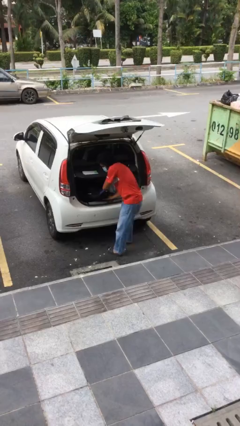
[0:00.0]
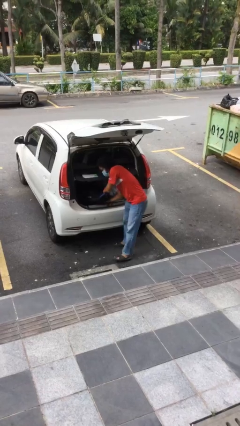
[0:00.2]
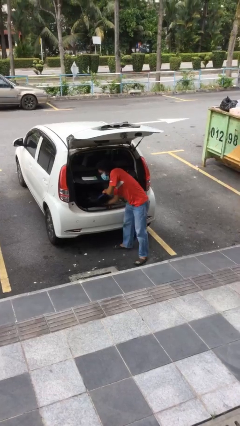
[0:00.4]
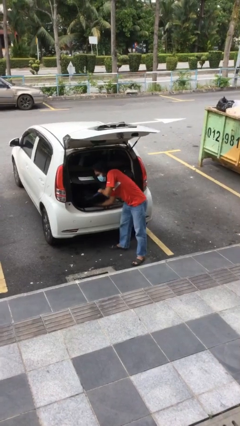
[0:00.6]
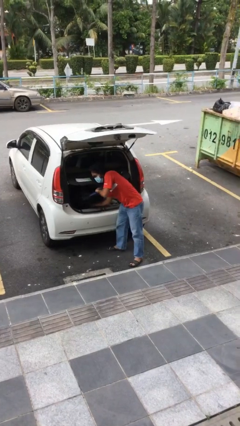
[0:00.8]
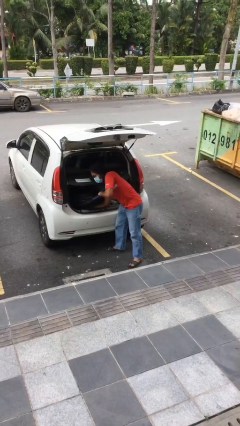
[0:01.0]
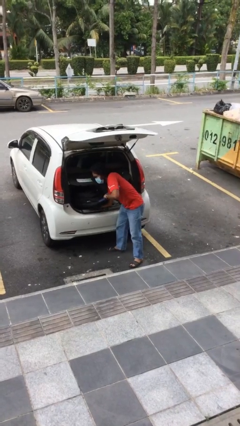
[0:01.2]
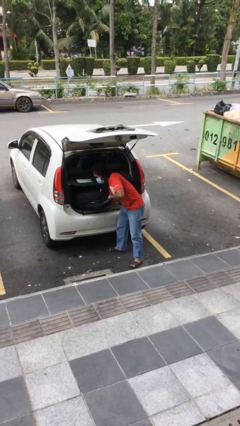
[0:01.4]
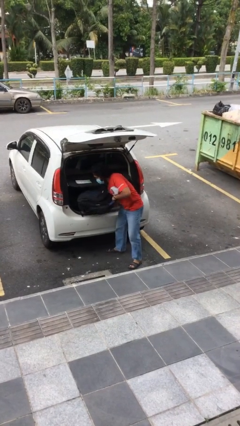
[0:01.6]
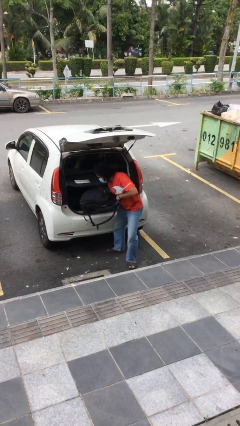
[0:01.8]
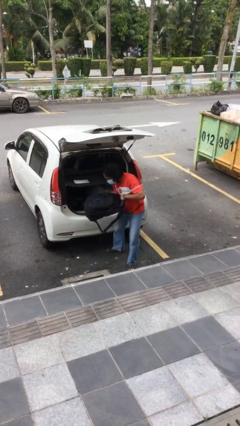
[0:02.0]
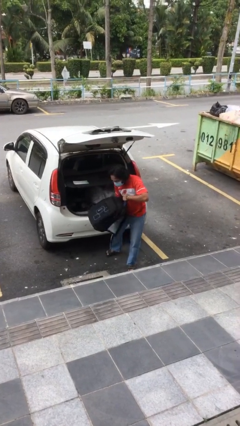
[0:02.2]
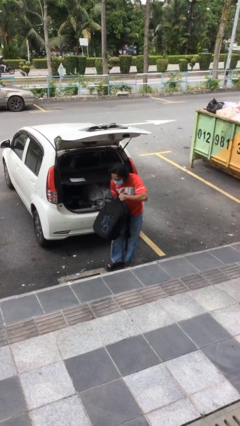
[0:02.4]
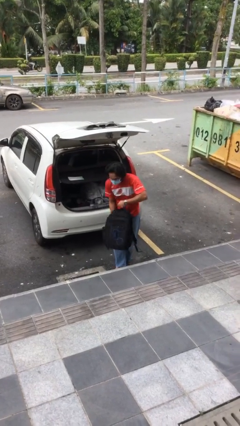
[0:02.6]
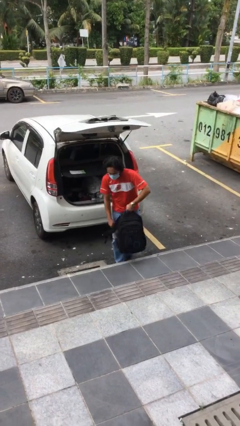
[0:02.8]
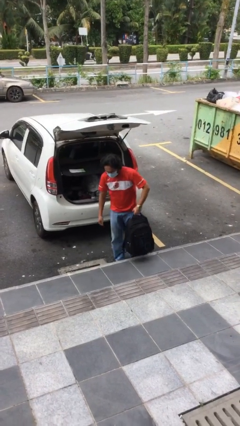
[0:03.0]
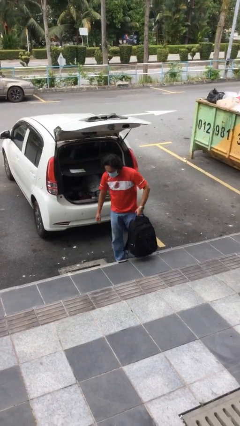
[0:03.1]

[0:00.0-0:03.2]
person unloads car

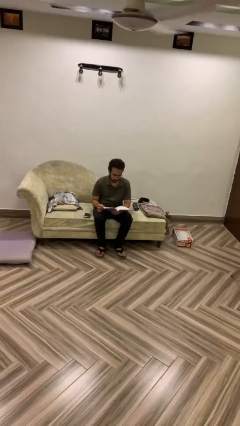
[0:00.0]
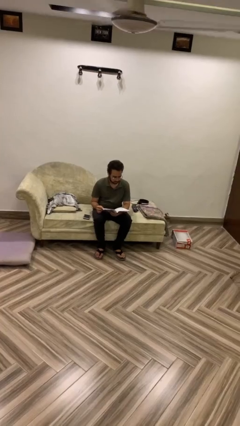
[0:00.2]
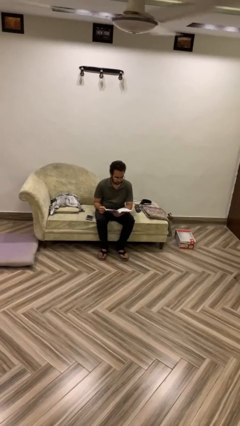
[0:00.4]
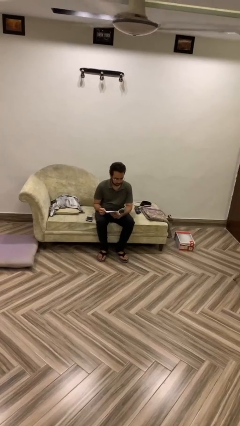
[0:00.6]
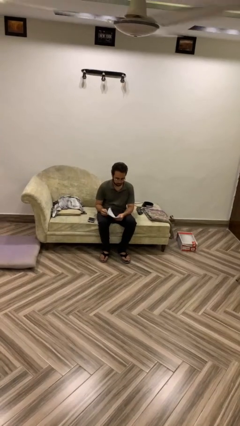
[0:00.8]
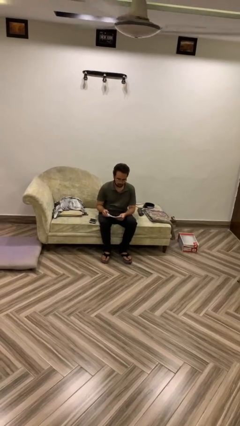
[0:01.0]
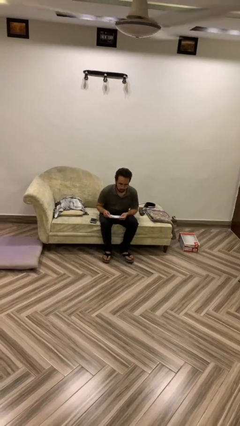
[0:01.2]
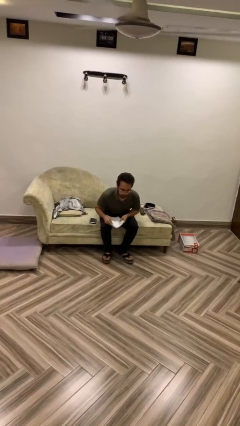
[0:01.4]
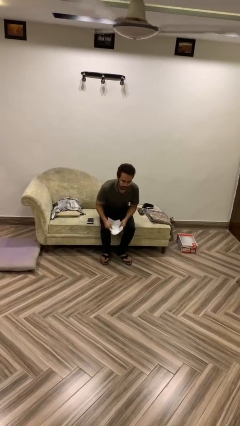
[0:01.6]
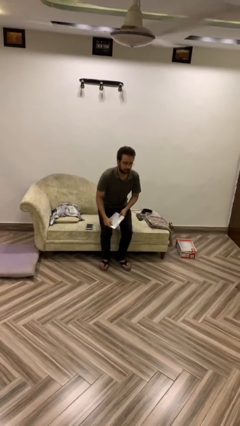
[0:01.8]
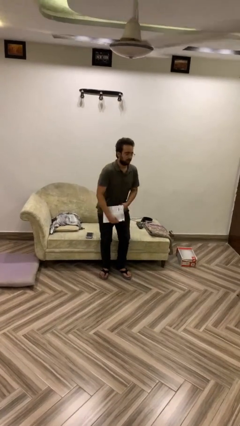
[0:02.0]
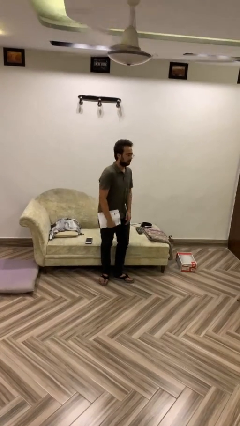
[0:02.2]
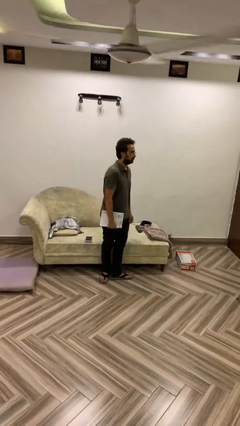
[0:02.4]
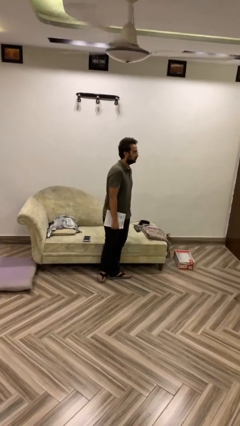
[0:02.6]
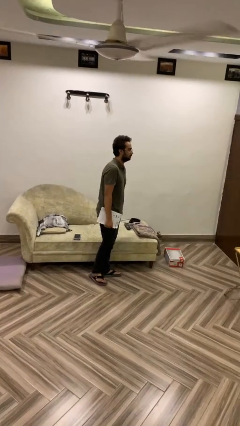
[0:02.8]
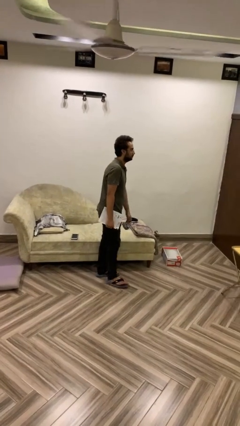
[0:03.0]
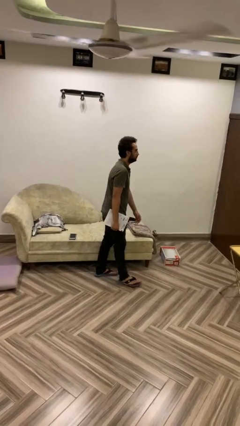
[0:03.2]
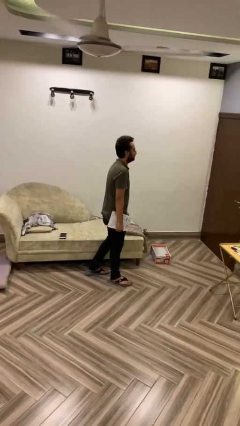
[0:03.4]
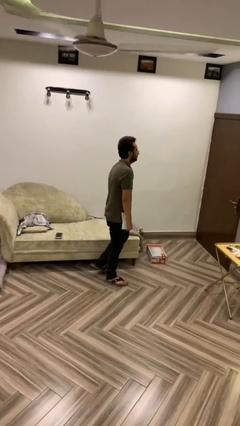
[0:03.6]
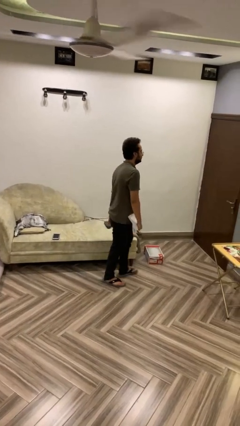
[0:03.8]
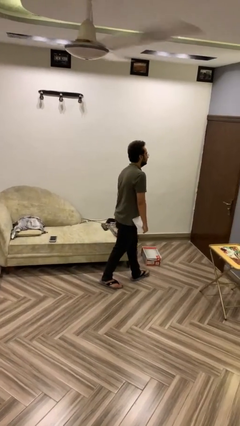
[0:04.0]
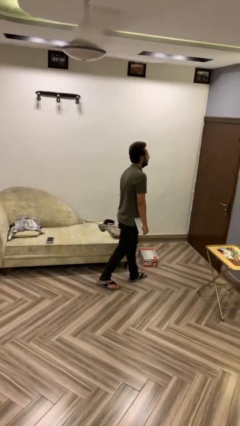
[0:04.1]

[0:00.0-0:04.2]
person stands up

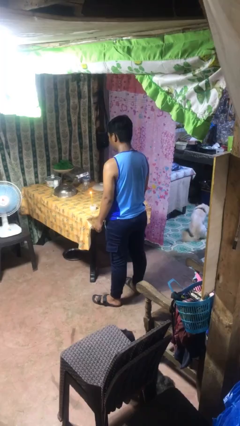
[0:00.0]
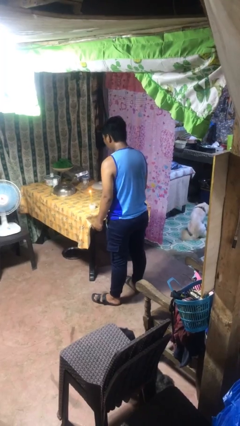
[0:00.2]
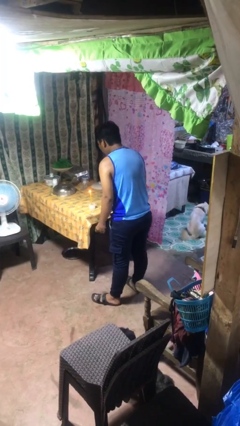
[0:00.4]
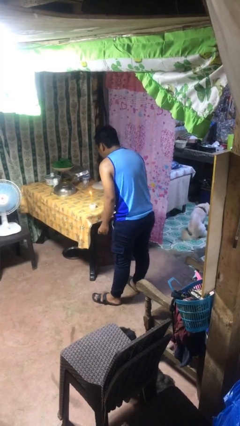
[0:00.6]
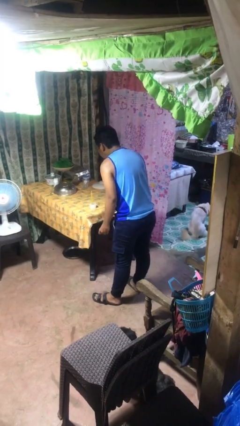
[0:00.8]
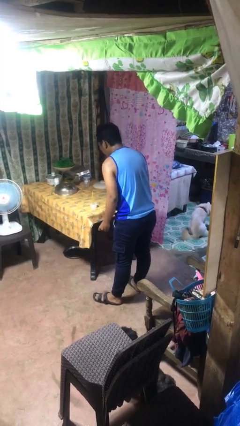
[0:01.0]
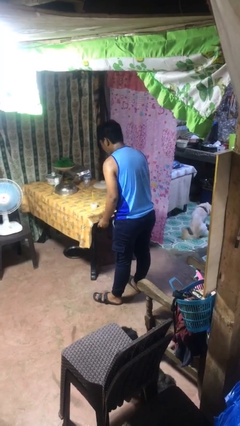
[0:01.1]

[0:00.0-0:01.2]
person extinguishes candle

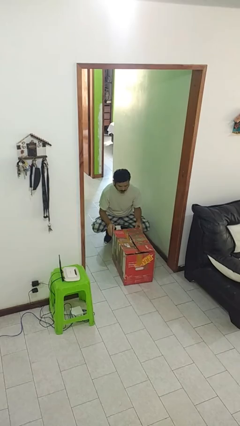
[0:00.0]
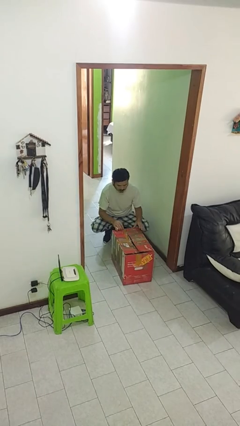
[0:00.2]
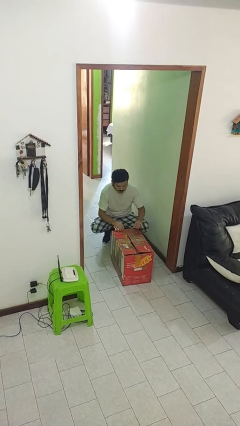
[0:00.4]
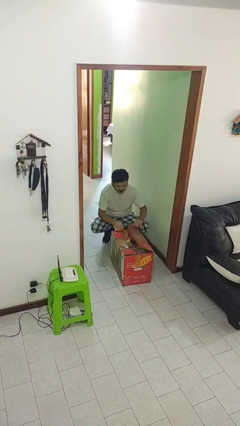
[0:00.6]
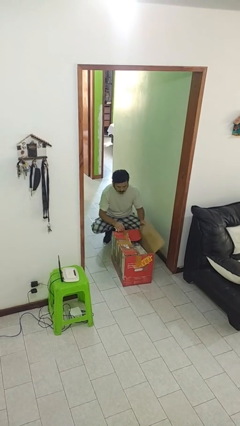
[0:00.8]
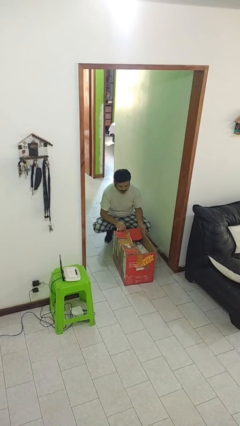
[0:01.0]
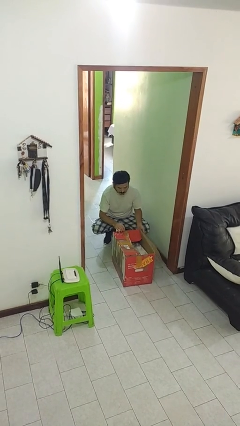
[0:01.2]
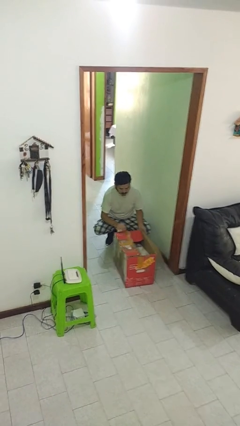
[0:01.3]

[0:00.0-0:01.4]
person opens box

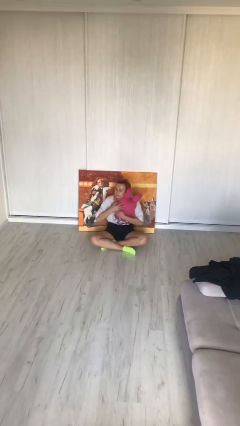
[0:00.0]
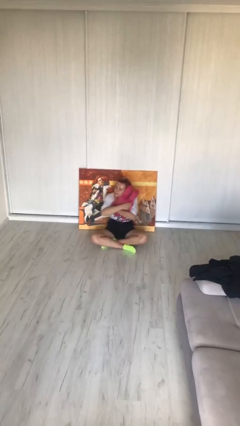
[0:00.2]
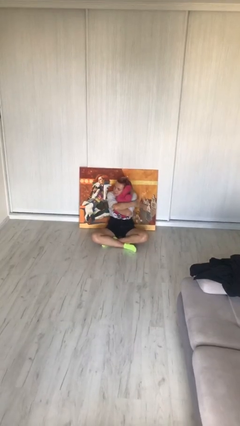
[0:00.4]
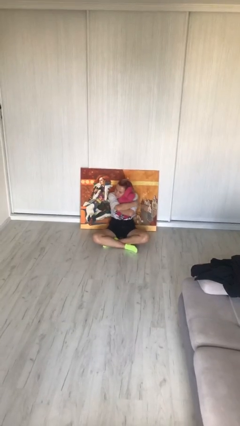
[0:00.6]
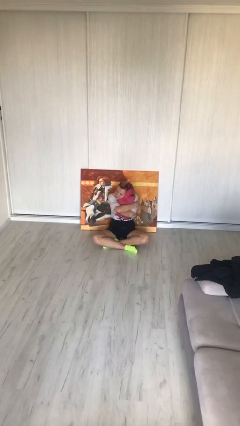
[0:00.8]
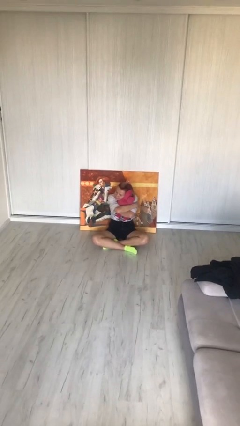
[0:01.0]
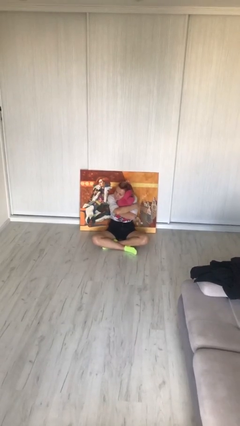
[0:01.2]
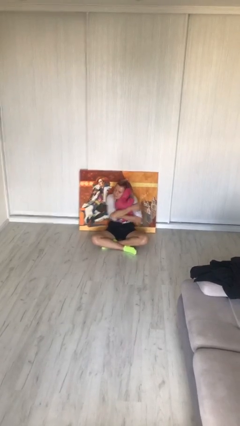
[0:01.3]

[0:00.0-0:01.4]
person hugs stuffed animal

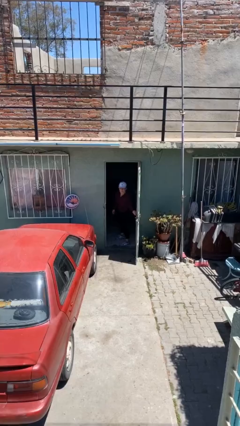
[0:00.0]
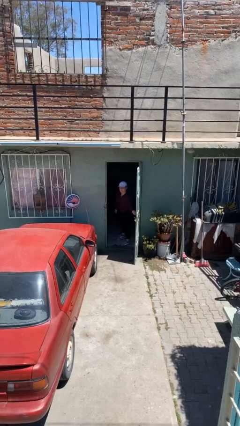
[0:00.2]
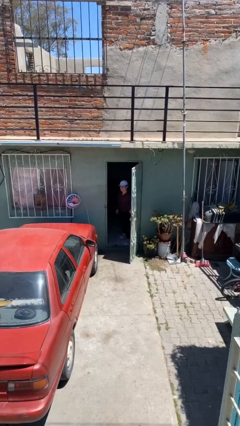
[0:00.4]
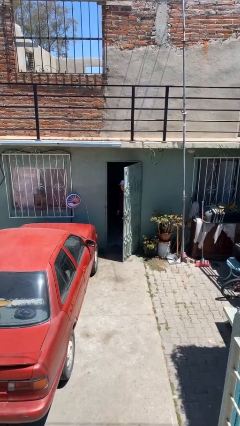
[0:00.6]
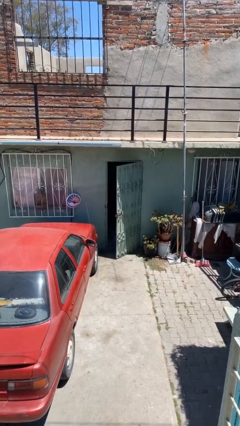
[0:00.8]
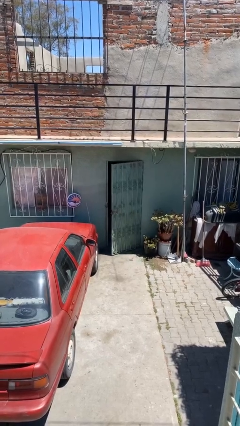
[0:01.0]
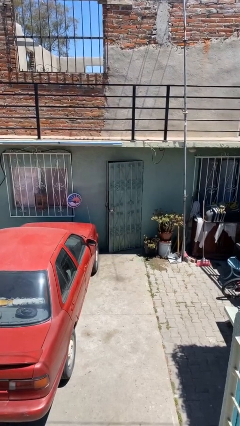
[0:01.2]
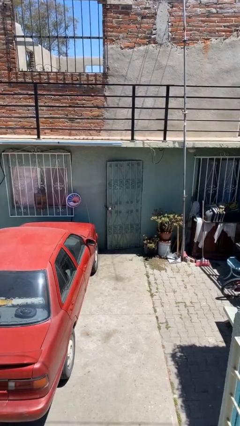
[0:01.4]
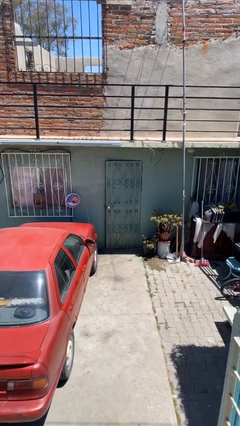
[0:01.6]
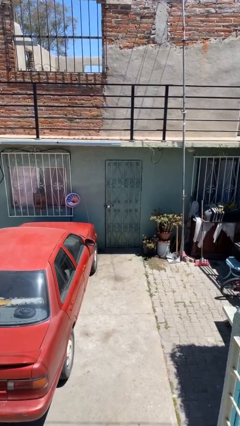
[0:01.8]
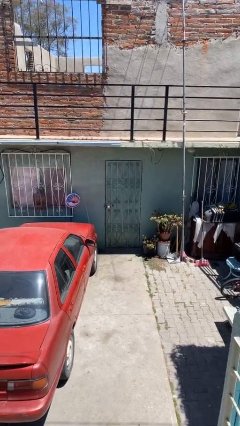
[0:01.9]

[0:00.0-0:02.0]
person closes facility door

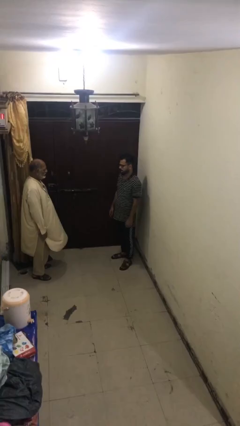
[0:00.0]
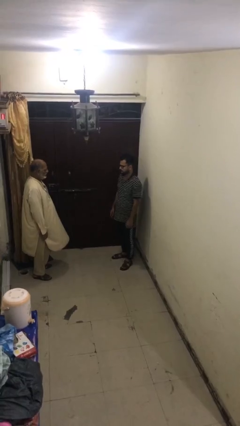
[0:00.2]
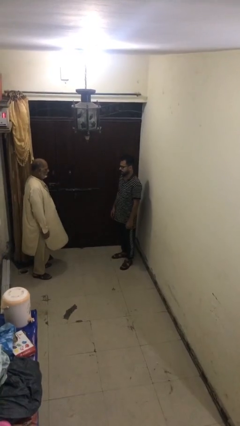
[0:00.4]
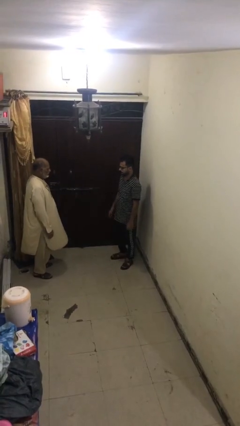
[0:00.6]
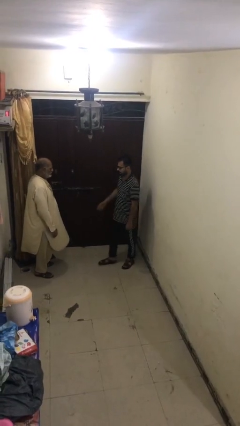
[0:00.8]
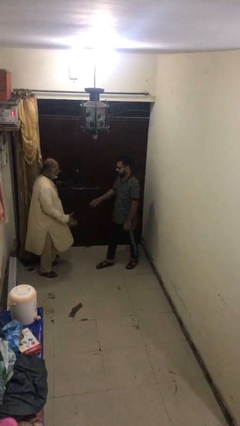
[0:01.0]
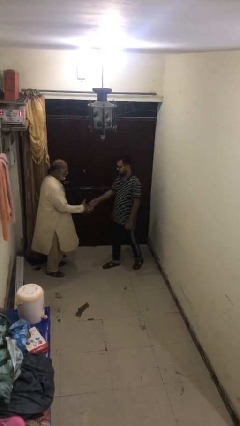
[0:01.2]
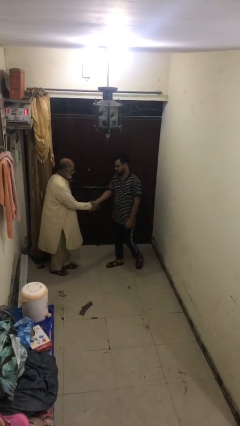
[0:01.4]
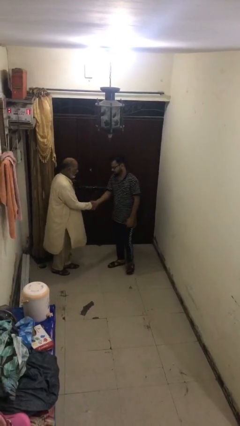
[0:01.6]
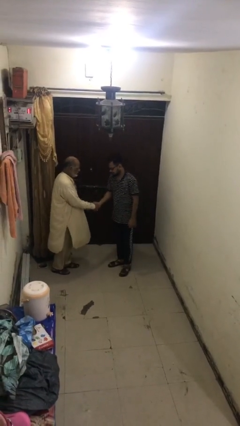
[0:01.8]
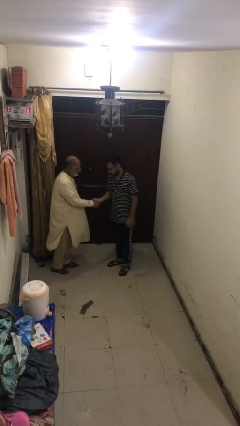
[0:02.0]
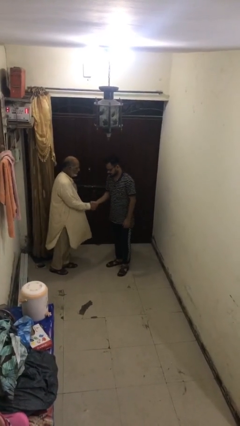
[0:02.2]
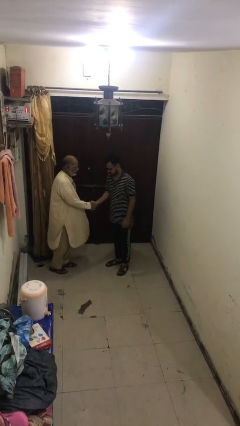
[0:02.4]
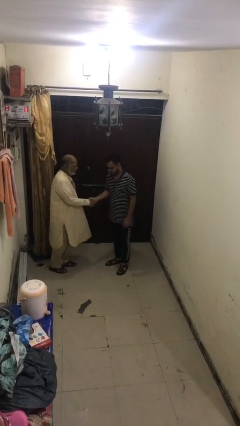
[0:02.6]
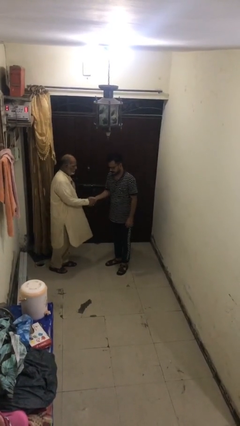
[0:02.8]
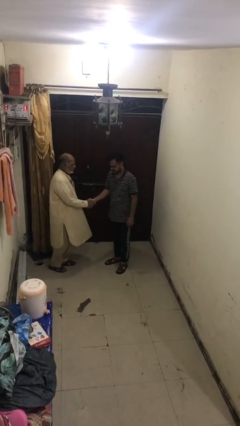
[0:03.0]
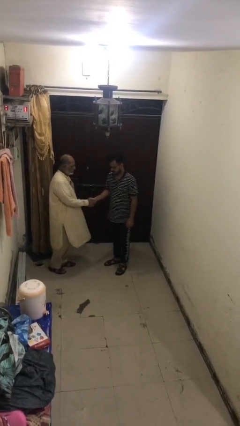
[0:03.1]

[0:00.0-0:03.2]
person shakes hand

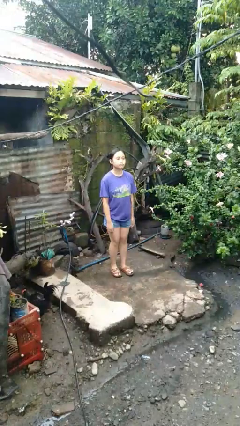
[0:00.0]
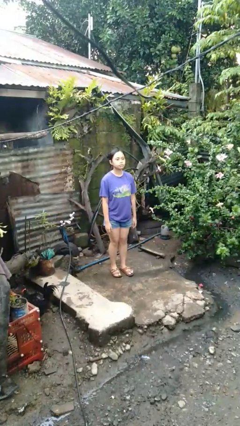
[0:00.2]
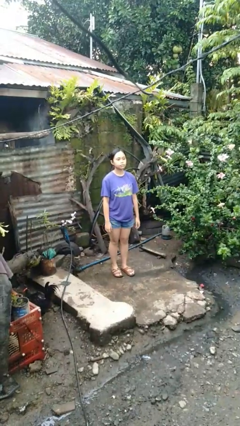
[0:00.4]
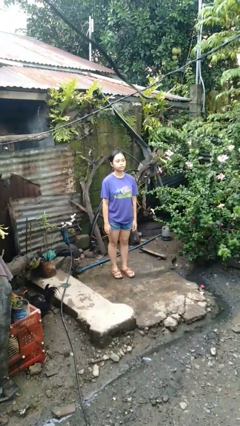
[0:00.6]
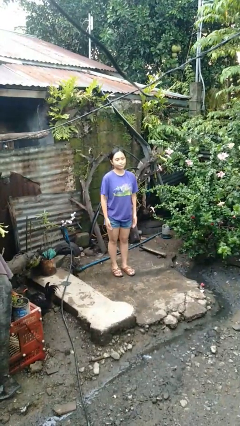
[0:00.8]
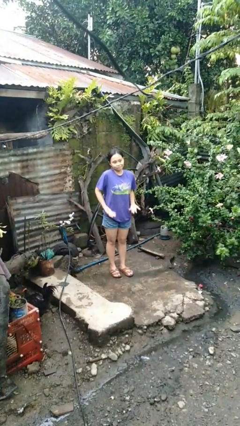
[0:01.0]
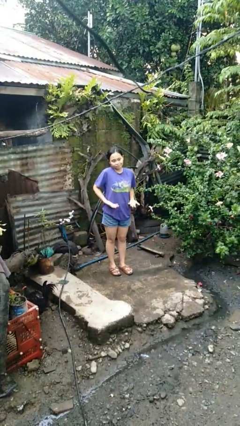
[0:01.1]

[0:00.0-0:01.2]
person shrugs
